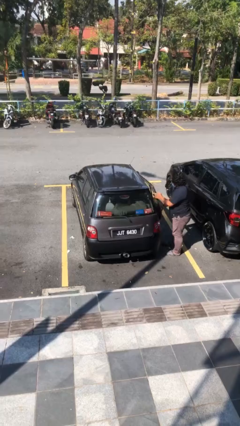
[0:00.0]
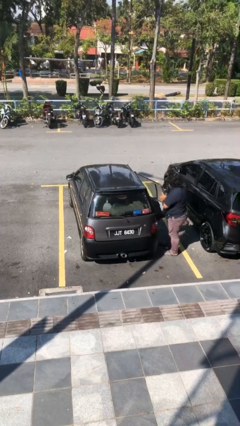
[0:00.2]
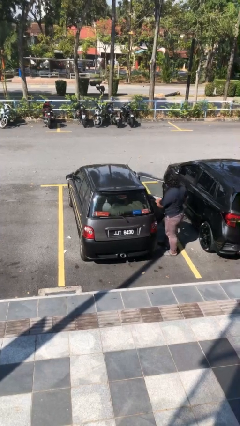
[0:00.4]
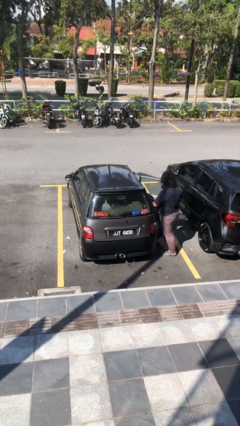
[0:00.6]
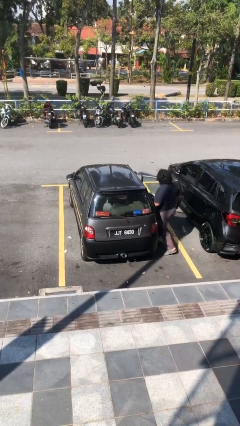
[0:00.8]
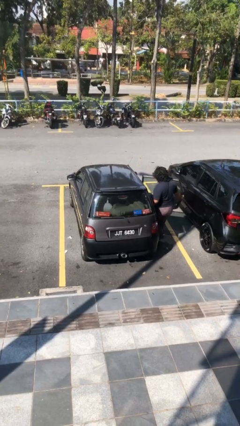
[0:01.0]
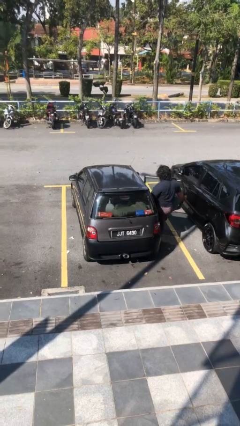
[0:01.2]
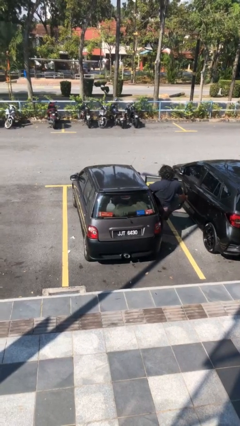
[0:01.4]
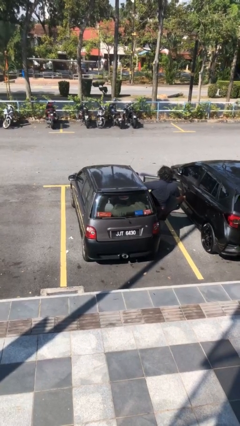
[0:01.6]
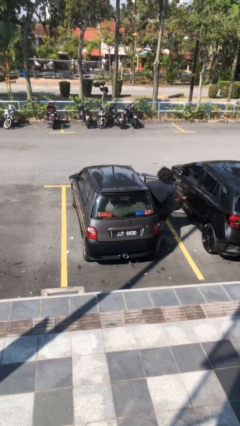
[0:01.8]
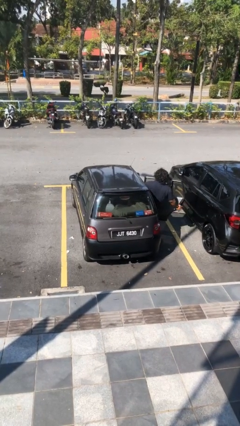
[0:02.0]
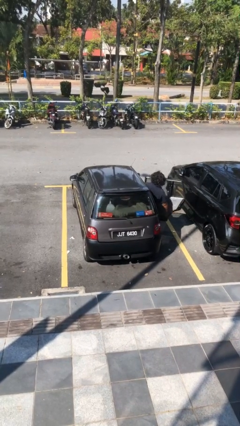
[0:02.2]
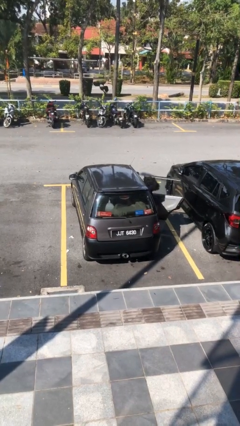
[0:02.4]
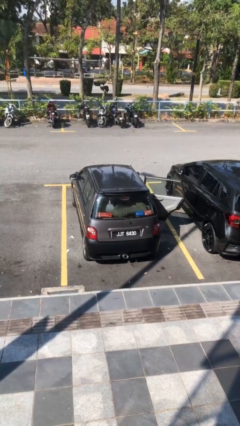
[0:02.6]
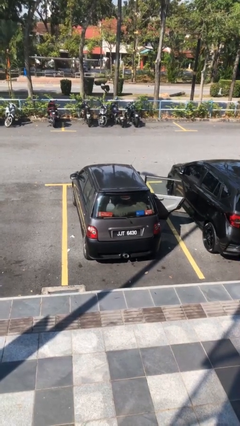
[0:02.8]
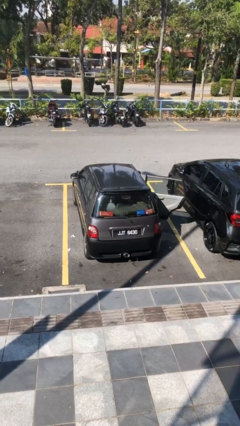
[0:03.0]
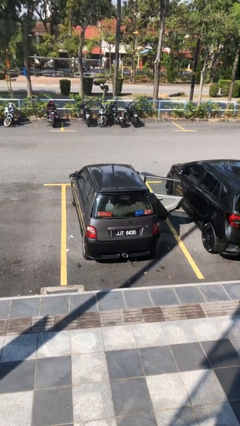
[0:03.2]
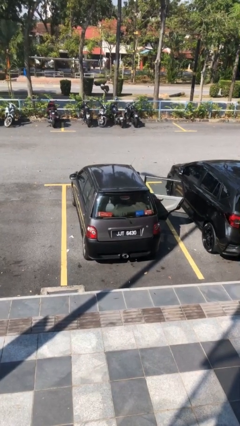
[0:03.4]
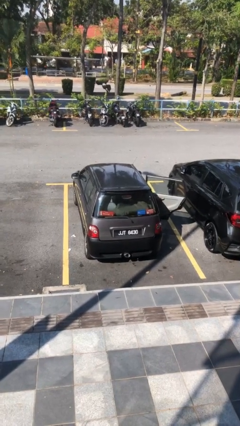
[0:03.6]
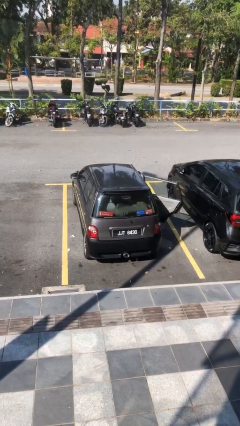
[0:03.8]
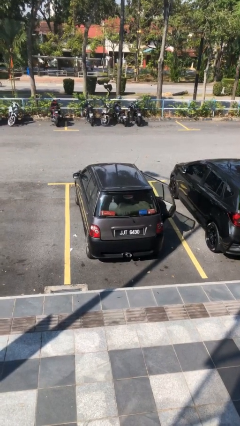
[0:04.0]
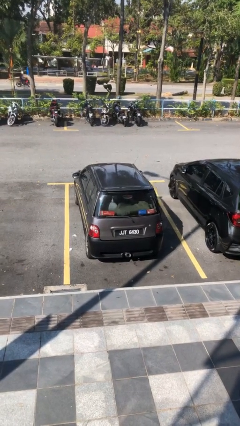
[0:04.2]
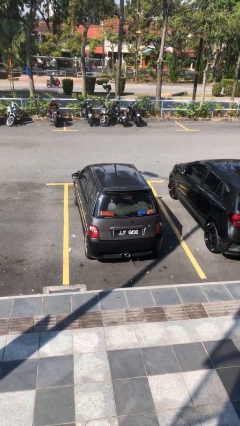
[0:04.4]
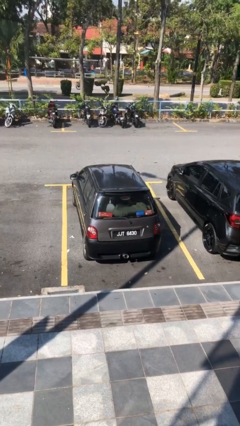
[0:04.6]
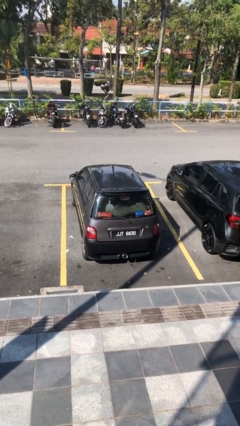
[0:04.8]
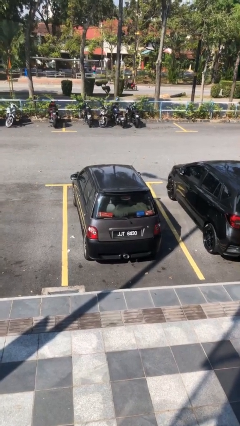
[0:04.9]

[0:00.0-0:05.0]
car picks up person

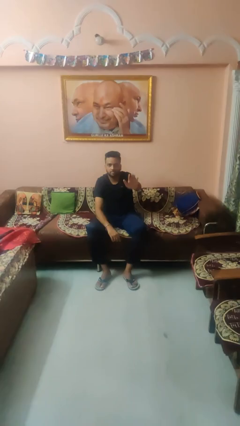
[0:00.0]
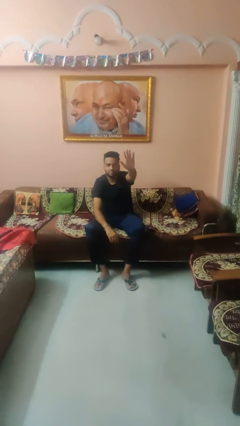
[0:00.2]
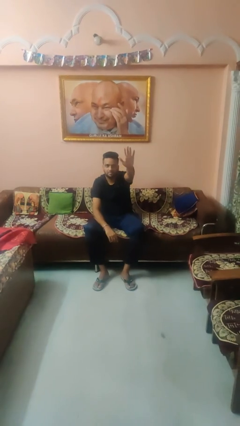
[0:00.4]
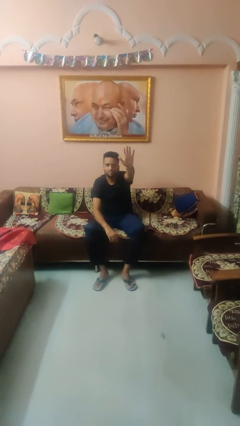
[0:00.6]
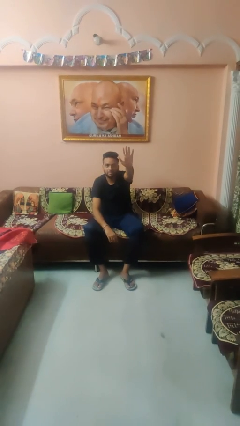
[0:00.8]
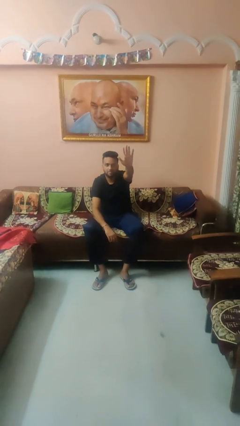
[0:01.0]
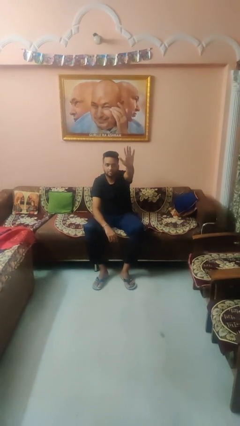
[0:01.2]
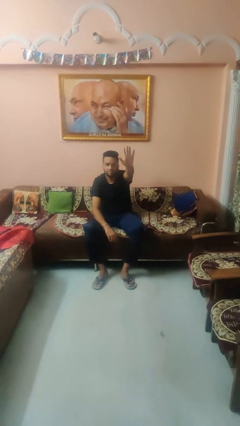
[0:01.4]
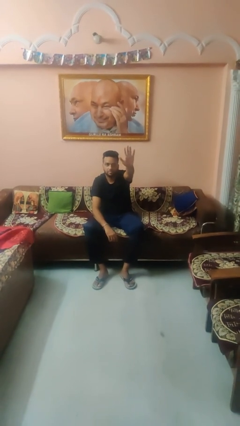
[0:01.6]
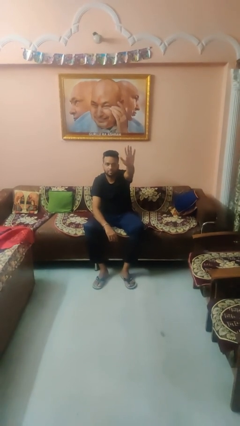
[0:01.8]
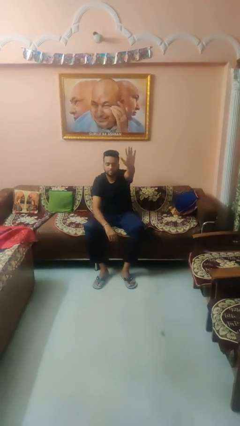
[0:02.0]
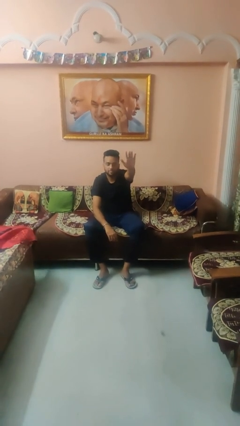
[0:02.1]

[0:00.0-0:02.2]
person gestures number five

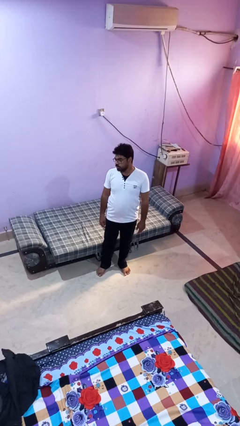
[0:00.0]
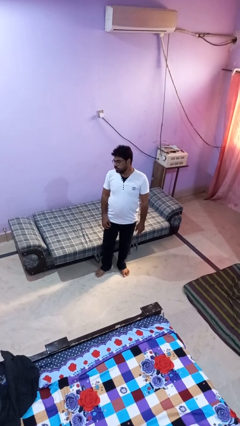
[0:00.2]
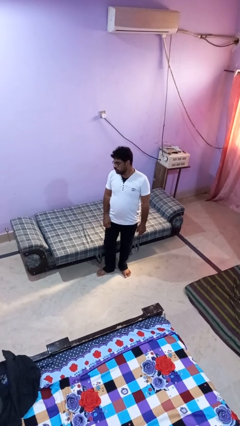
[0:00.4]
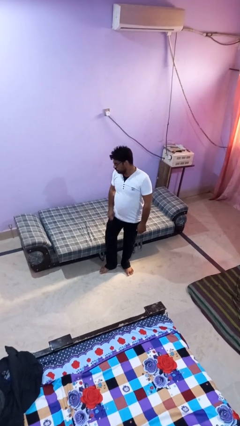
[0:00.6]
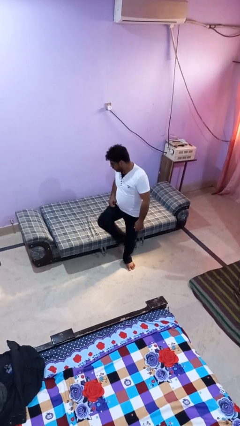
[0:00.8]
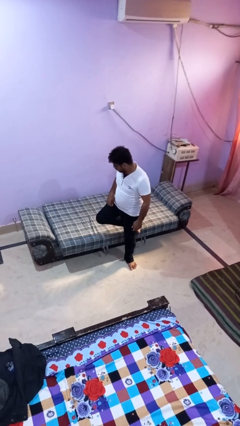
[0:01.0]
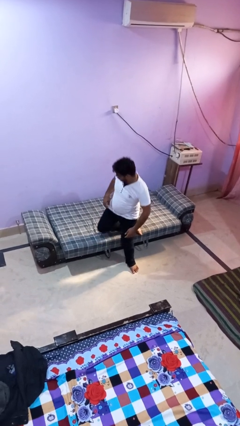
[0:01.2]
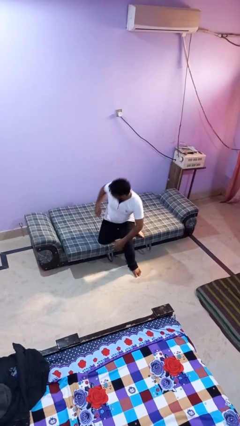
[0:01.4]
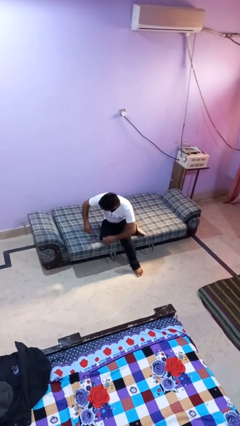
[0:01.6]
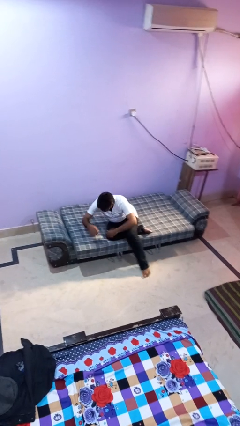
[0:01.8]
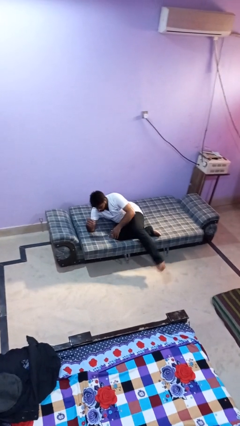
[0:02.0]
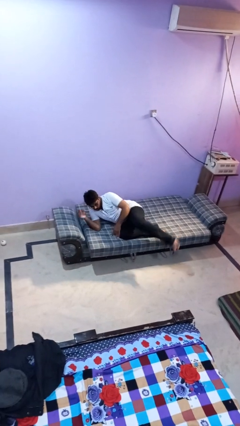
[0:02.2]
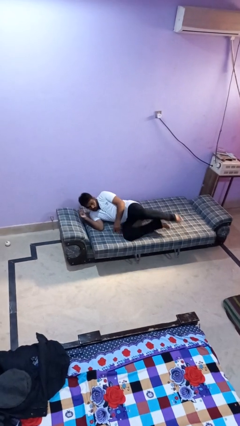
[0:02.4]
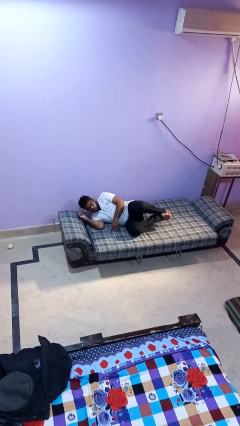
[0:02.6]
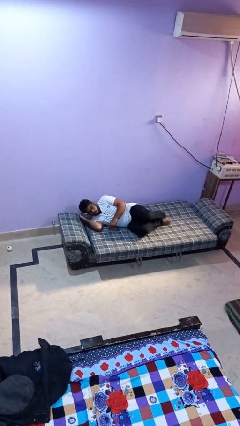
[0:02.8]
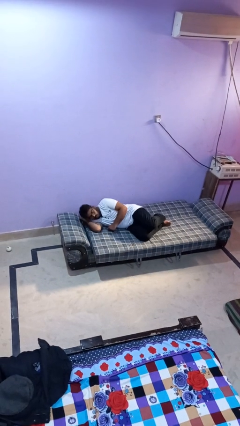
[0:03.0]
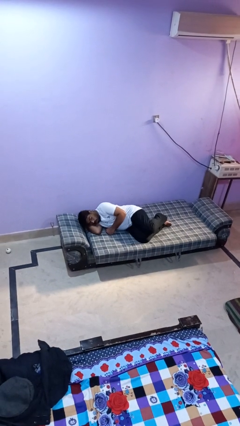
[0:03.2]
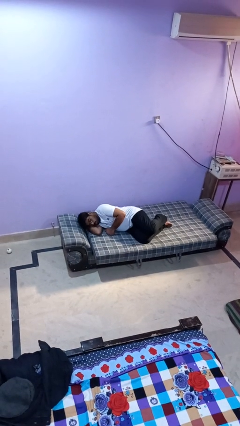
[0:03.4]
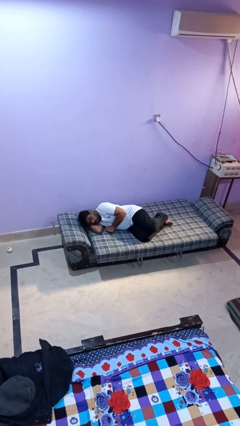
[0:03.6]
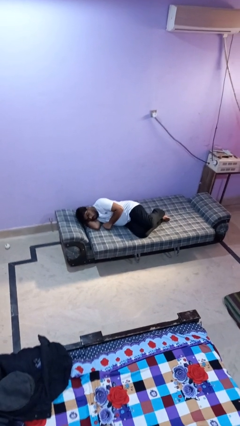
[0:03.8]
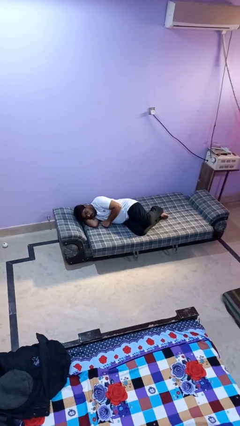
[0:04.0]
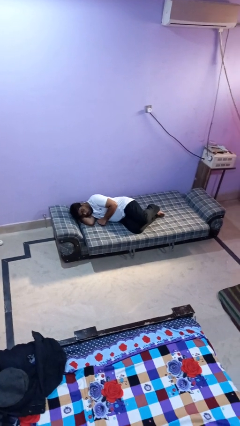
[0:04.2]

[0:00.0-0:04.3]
person lies down on bed

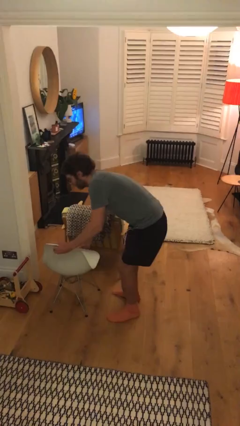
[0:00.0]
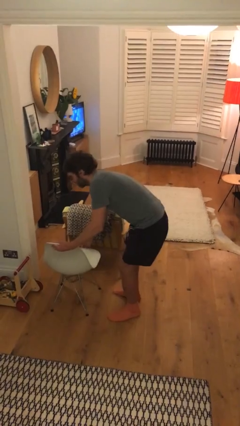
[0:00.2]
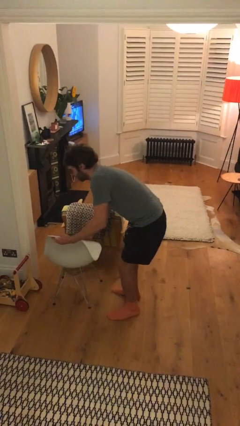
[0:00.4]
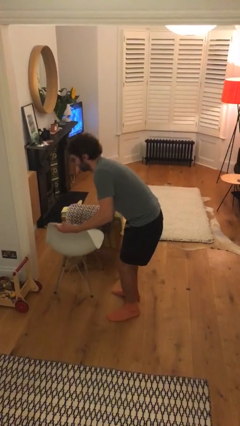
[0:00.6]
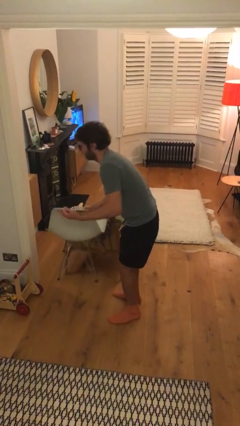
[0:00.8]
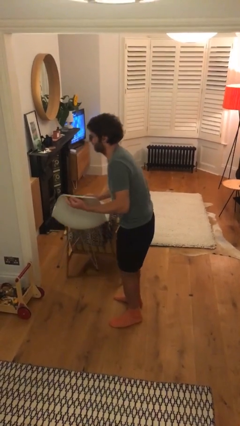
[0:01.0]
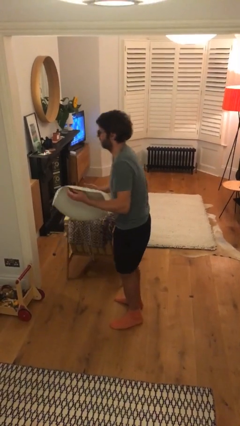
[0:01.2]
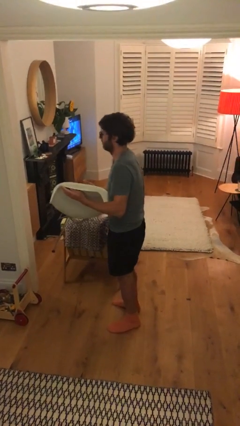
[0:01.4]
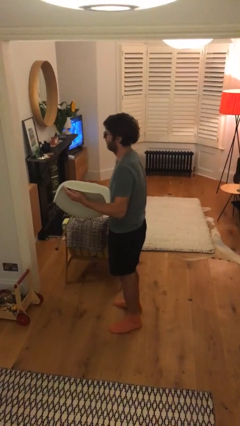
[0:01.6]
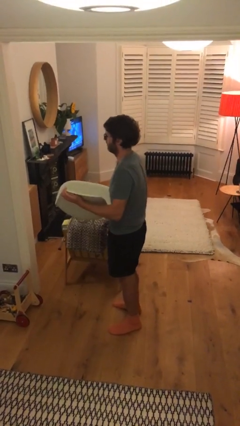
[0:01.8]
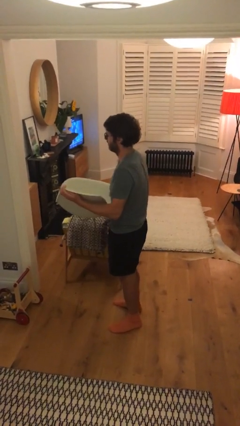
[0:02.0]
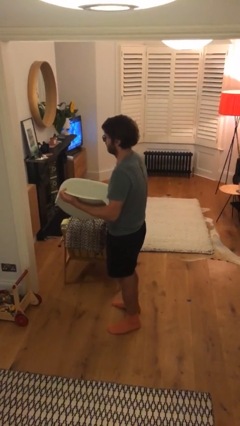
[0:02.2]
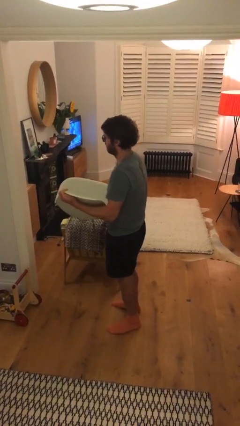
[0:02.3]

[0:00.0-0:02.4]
person picks up object from floor

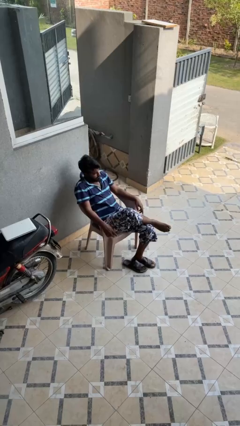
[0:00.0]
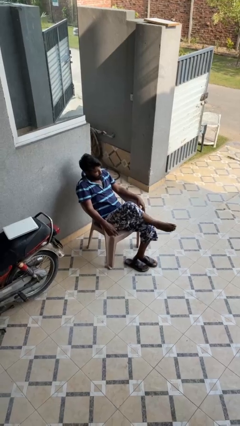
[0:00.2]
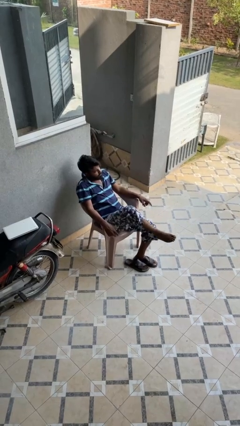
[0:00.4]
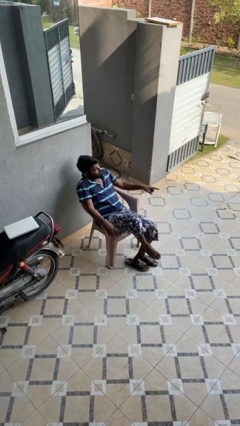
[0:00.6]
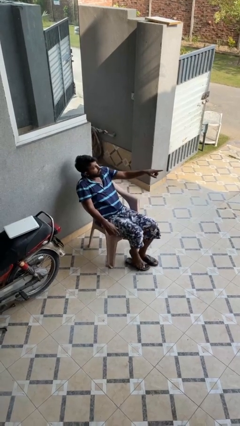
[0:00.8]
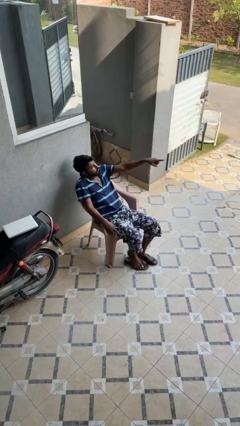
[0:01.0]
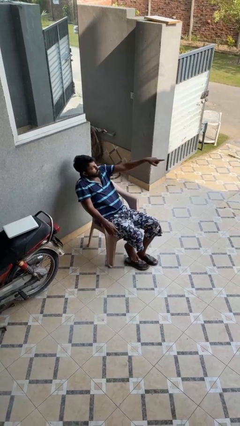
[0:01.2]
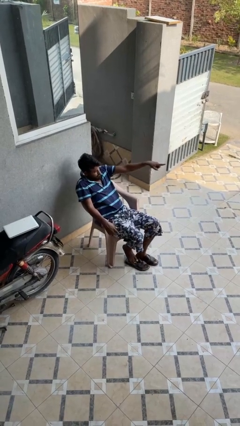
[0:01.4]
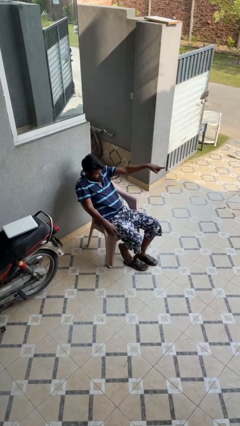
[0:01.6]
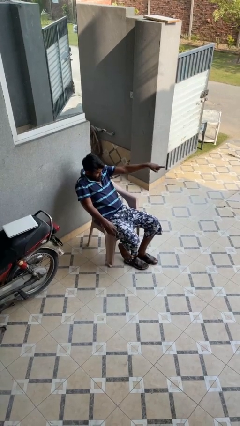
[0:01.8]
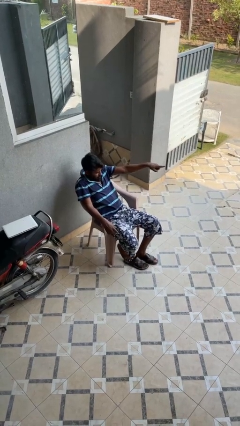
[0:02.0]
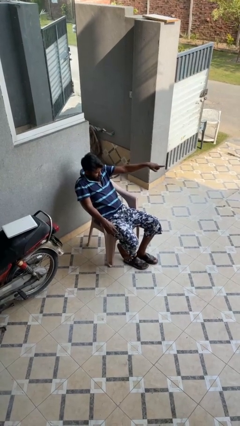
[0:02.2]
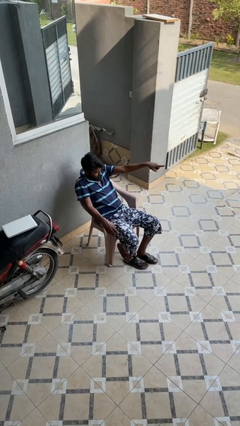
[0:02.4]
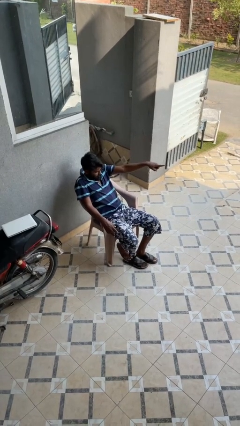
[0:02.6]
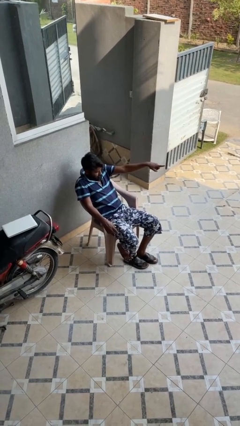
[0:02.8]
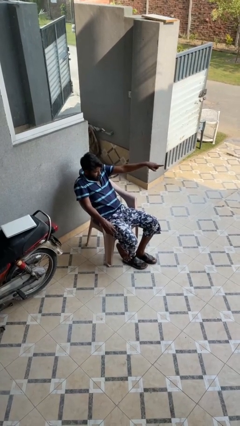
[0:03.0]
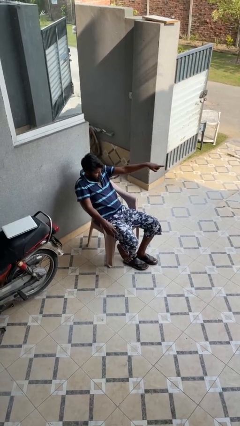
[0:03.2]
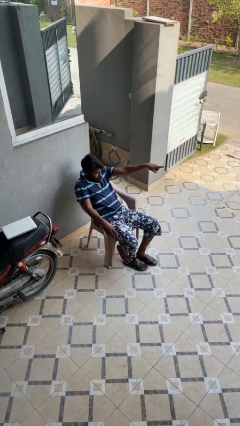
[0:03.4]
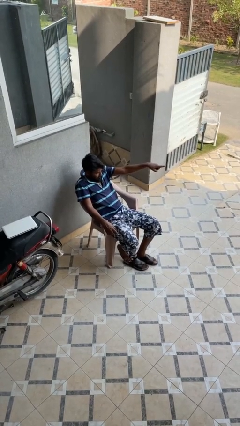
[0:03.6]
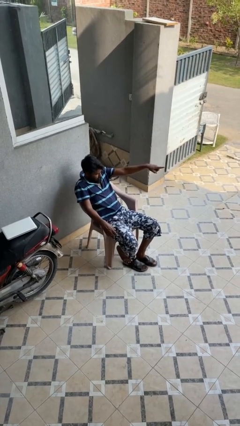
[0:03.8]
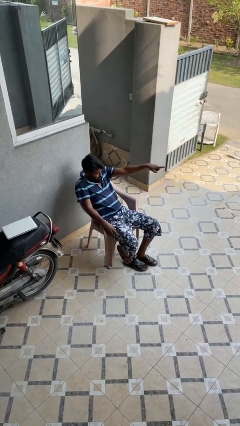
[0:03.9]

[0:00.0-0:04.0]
person points at person
